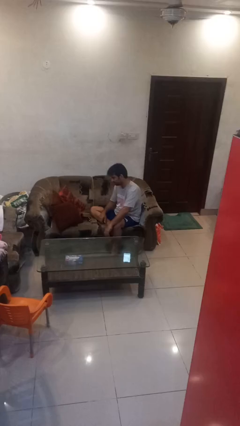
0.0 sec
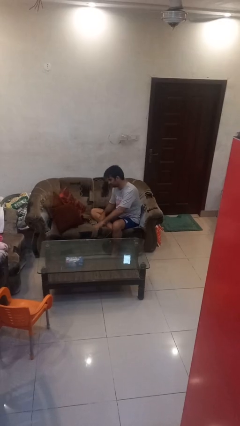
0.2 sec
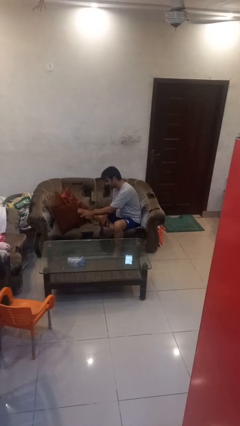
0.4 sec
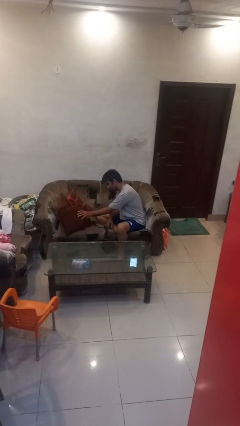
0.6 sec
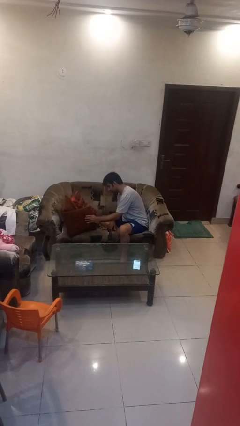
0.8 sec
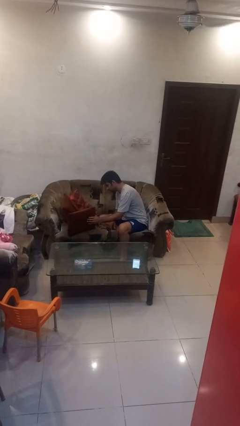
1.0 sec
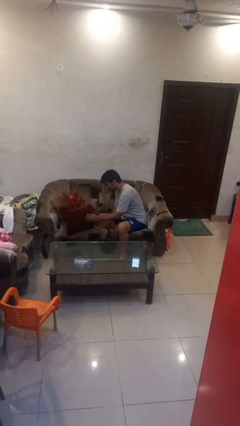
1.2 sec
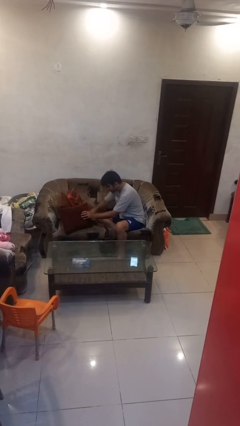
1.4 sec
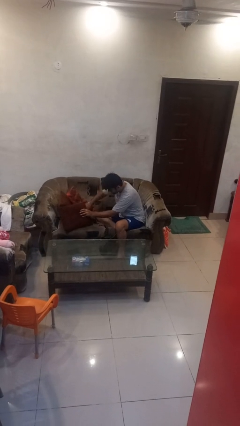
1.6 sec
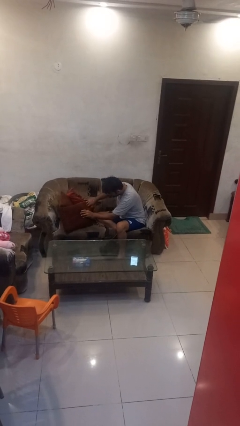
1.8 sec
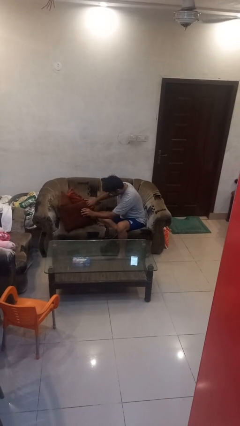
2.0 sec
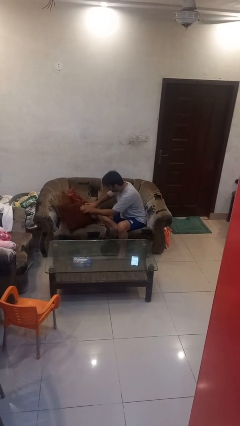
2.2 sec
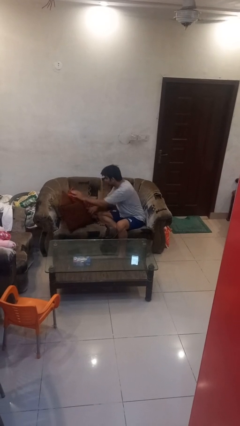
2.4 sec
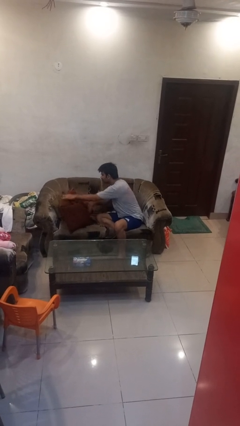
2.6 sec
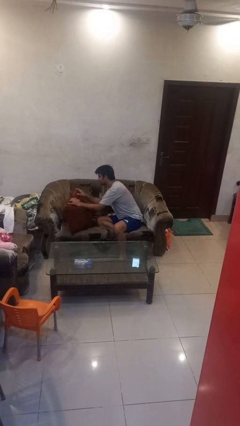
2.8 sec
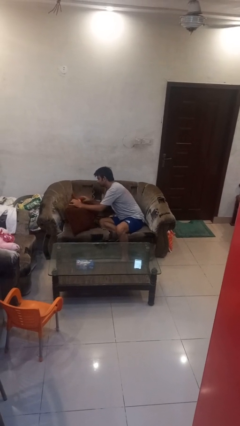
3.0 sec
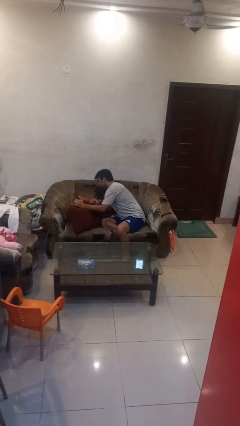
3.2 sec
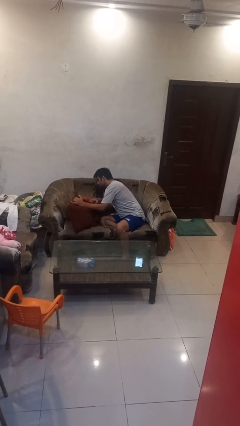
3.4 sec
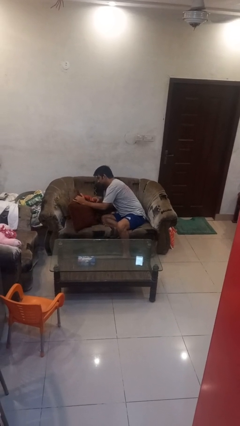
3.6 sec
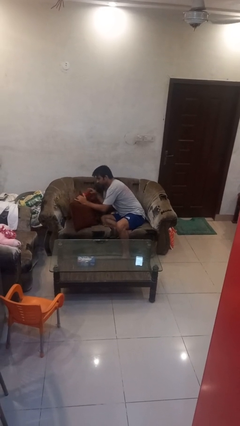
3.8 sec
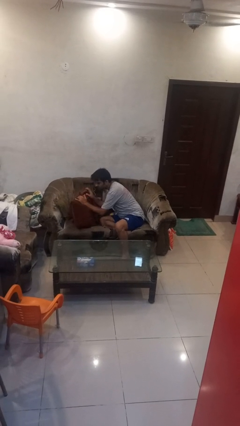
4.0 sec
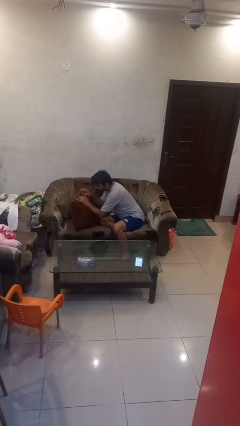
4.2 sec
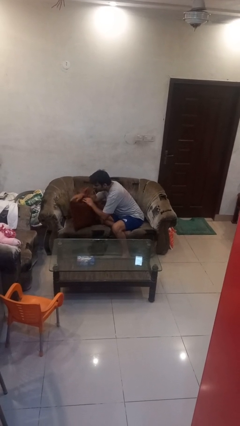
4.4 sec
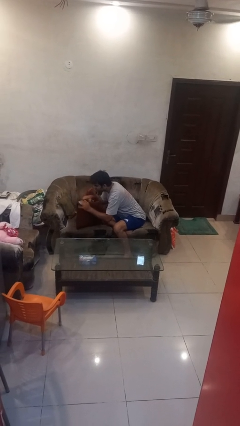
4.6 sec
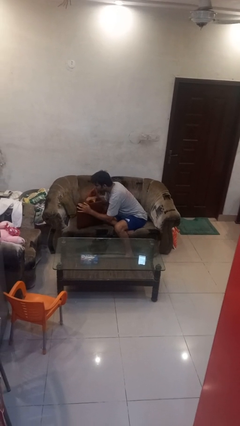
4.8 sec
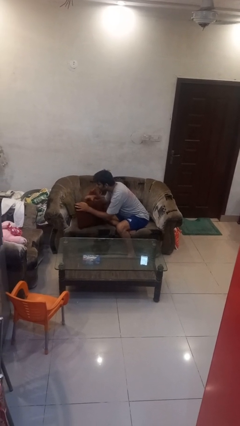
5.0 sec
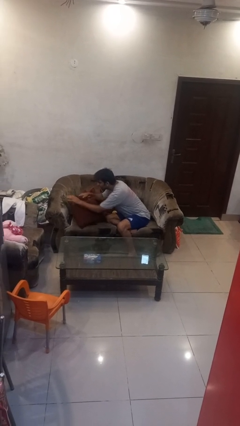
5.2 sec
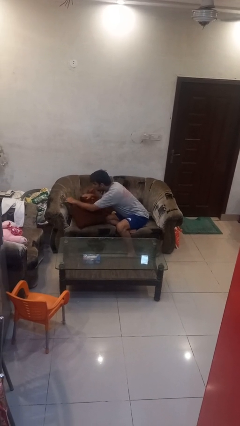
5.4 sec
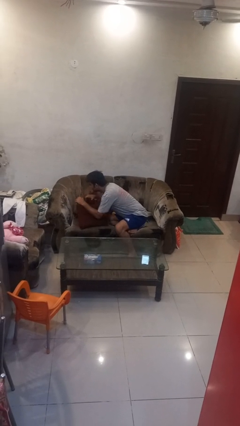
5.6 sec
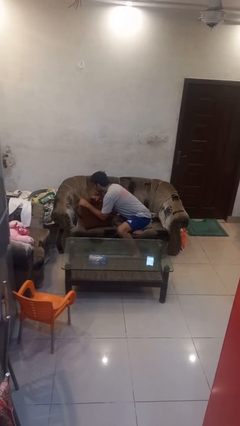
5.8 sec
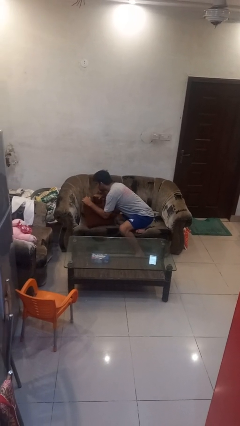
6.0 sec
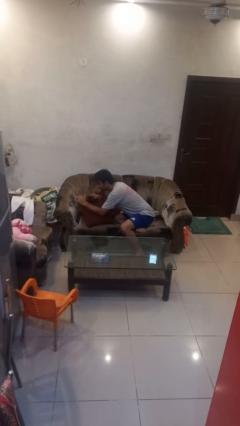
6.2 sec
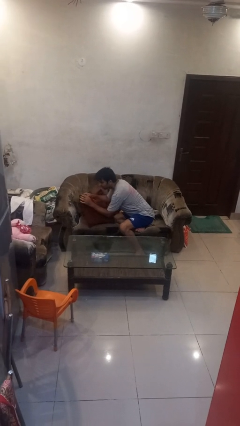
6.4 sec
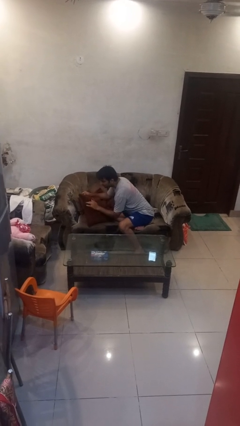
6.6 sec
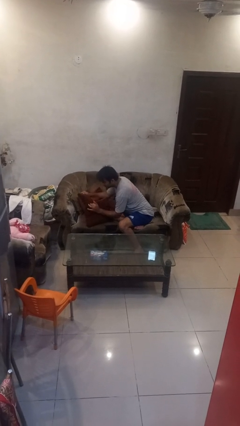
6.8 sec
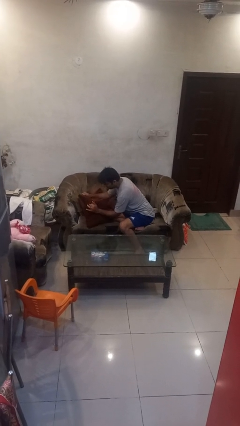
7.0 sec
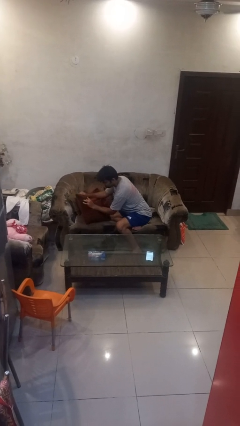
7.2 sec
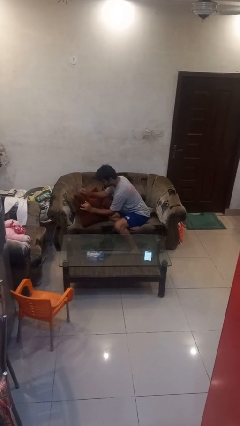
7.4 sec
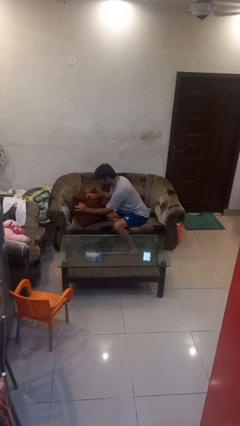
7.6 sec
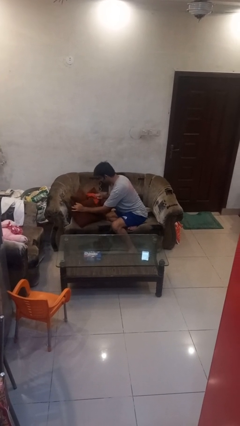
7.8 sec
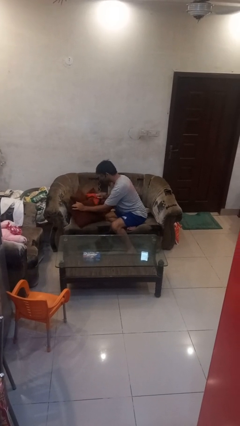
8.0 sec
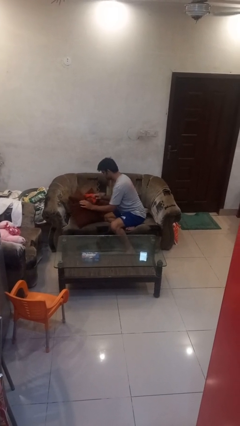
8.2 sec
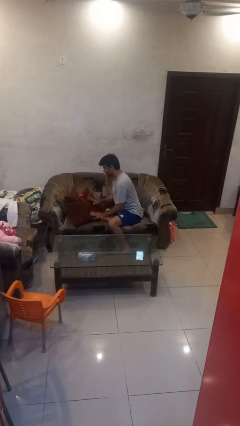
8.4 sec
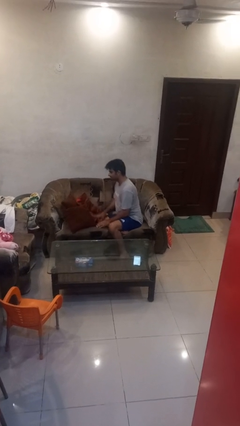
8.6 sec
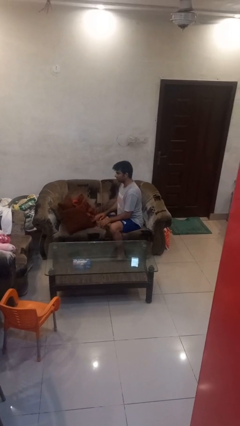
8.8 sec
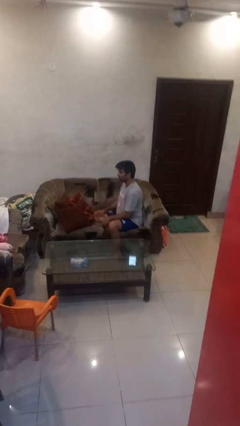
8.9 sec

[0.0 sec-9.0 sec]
person searches in couch

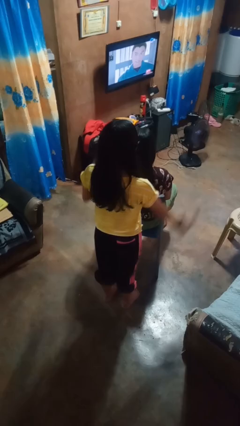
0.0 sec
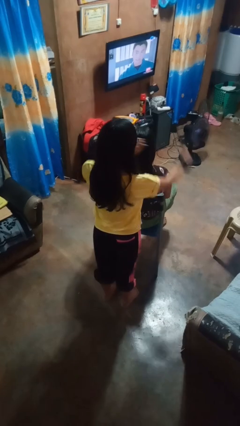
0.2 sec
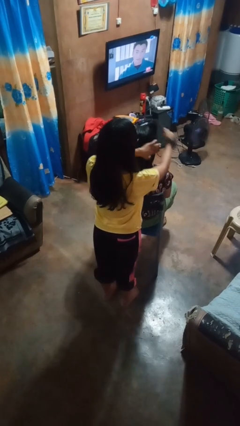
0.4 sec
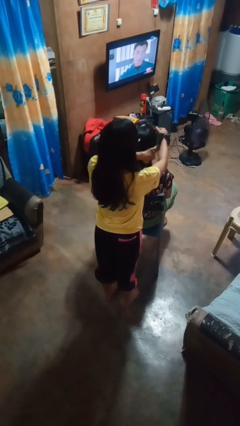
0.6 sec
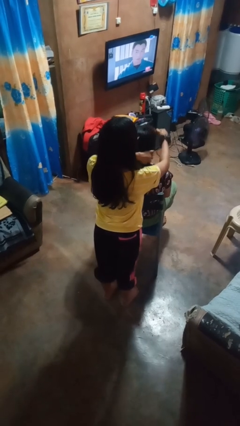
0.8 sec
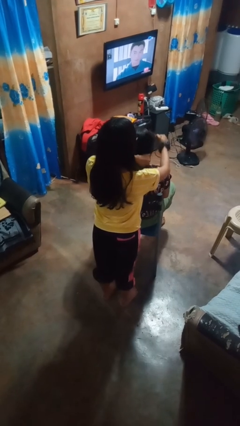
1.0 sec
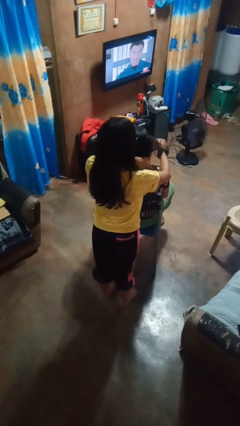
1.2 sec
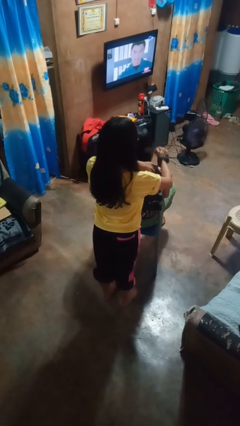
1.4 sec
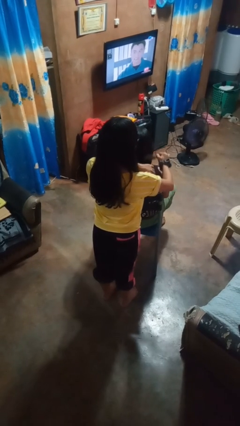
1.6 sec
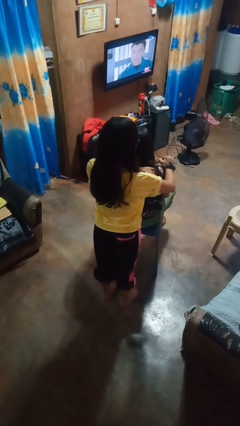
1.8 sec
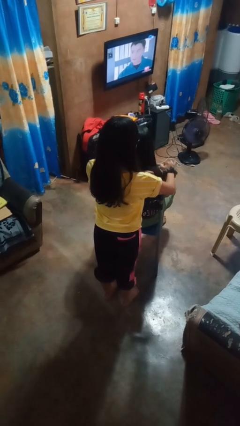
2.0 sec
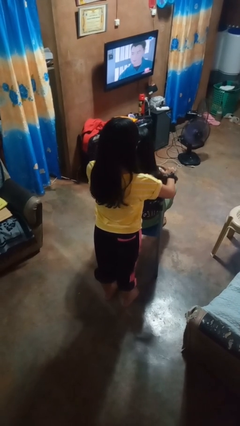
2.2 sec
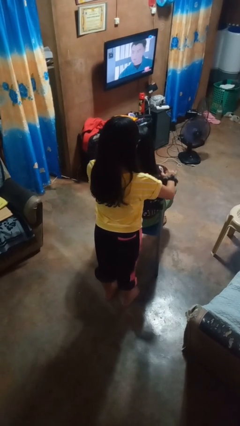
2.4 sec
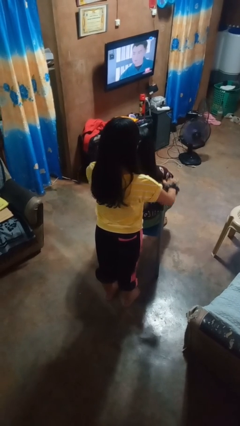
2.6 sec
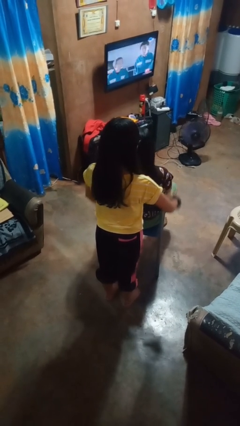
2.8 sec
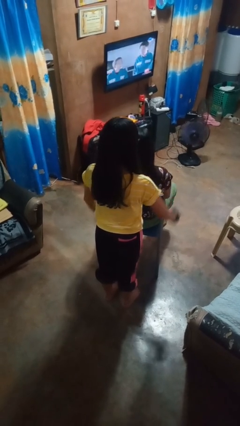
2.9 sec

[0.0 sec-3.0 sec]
person brushes hair of person

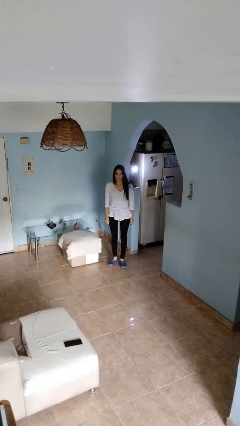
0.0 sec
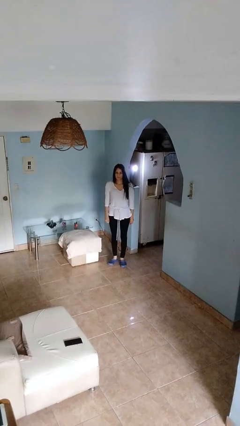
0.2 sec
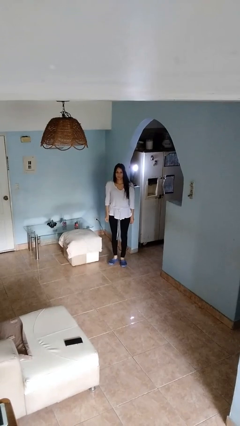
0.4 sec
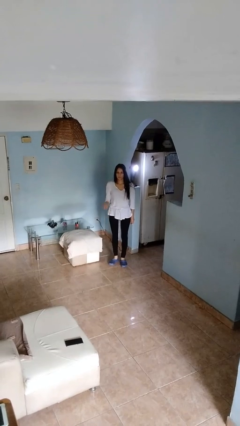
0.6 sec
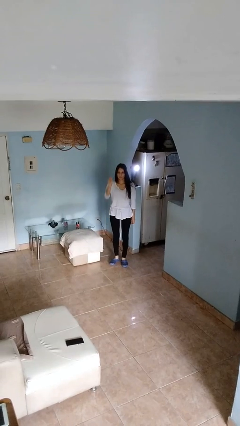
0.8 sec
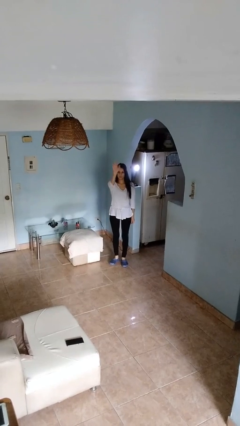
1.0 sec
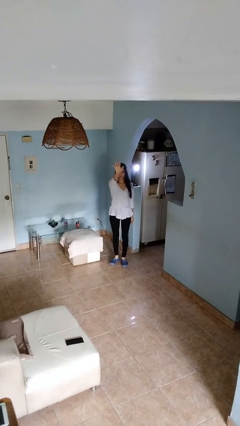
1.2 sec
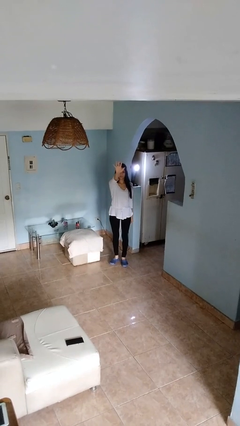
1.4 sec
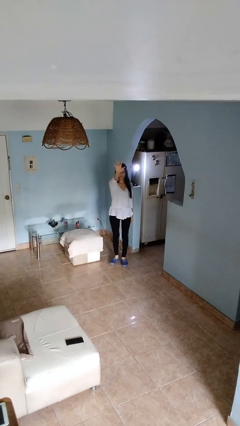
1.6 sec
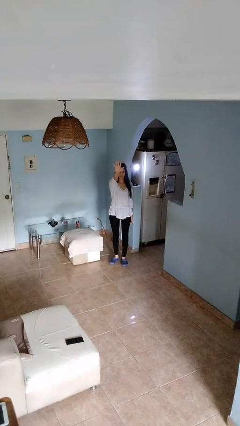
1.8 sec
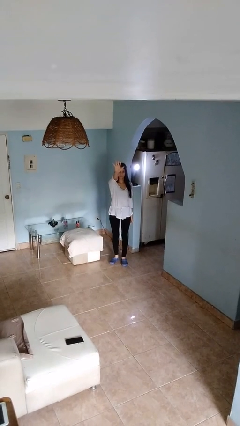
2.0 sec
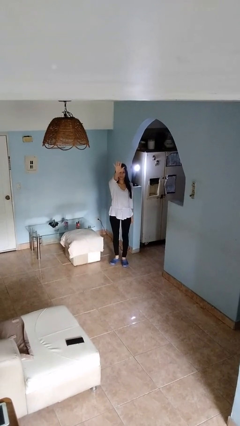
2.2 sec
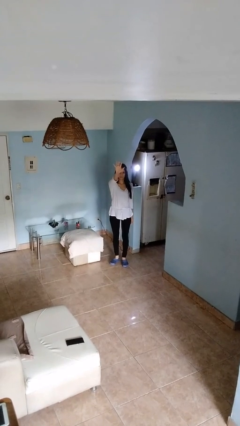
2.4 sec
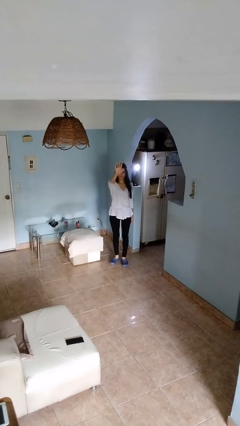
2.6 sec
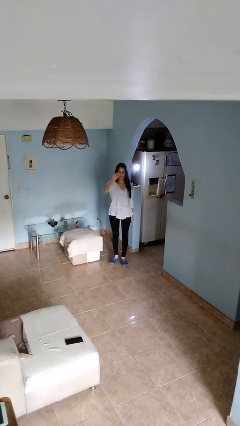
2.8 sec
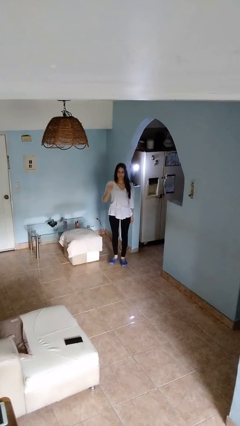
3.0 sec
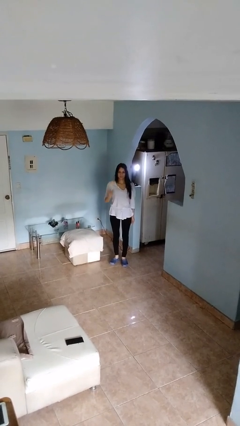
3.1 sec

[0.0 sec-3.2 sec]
person gestures number five

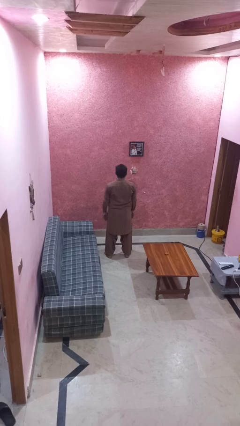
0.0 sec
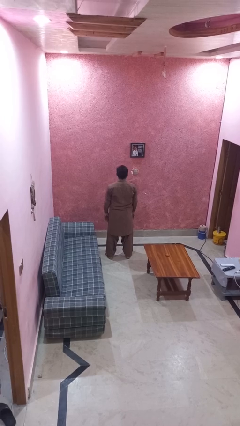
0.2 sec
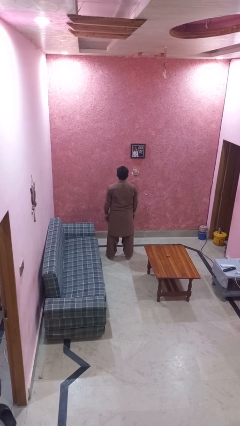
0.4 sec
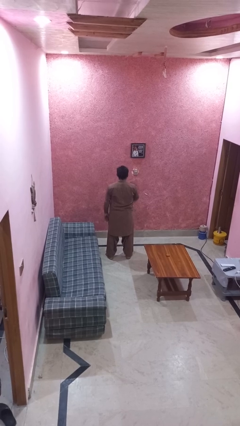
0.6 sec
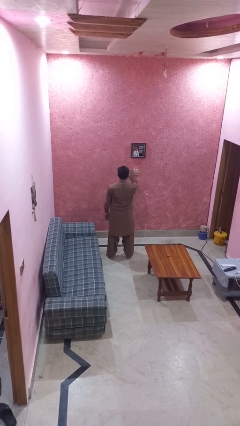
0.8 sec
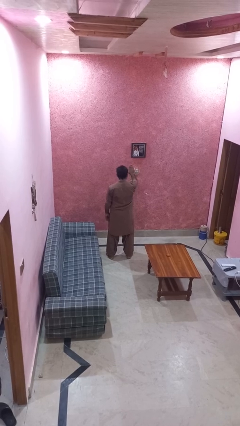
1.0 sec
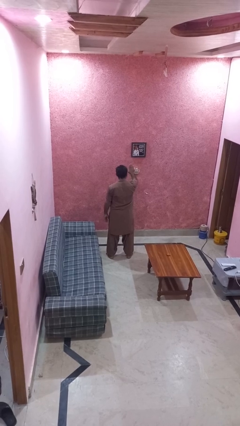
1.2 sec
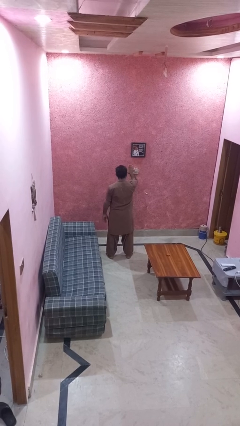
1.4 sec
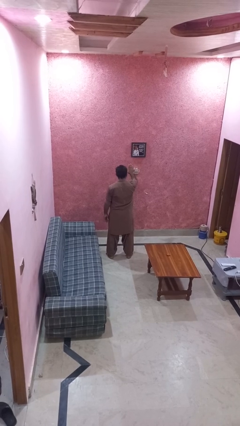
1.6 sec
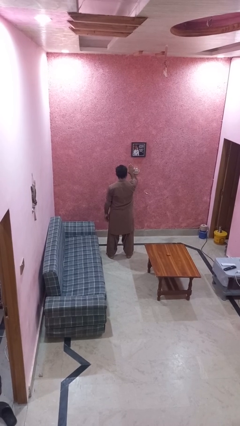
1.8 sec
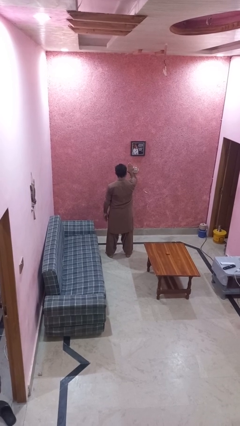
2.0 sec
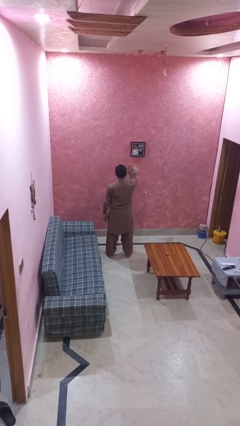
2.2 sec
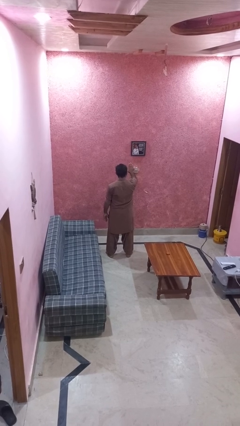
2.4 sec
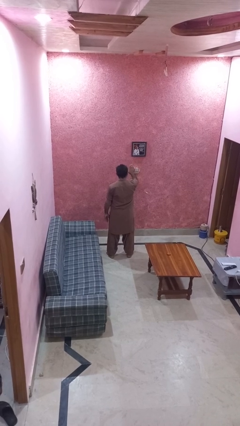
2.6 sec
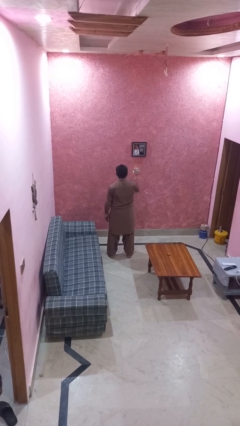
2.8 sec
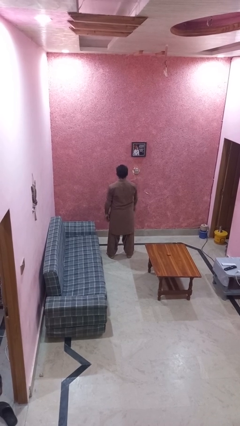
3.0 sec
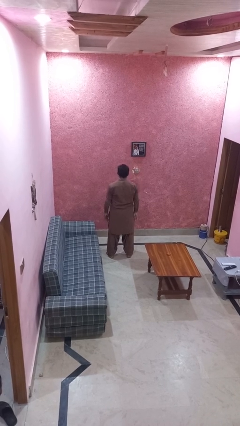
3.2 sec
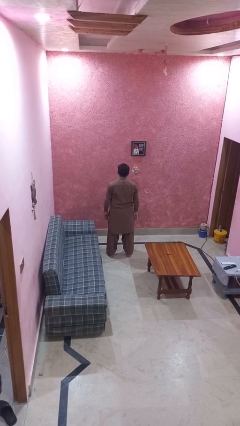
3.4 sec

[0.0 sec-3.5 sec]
person gestures stop
